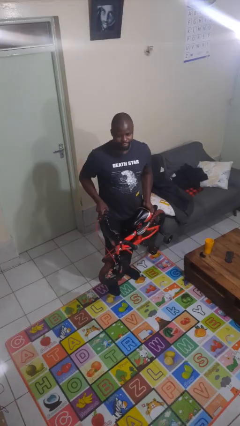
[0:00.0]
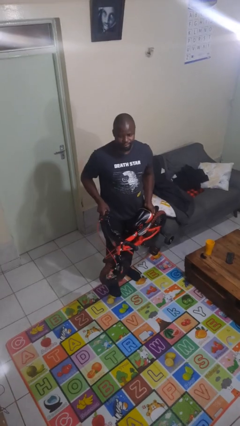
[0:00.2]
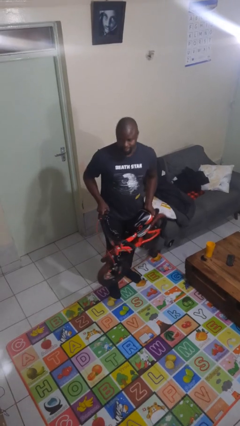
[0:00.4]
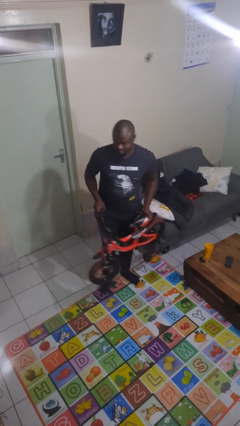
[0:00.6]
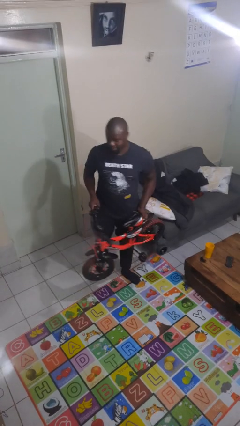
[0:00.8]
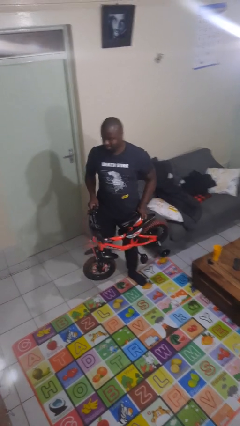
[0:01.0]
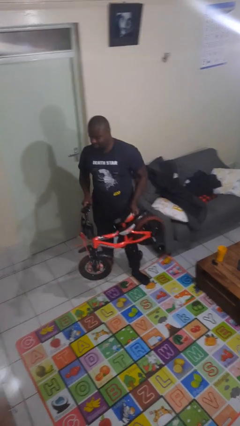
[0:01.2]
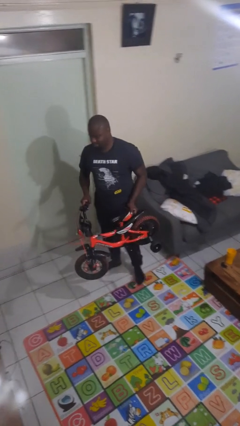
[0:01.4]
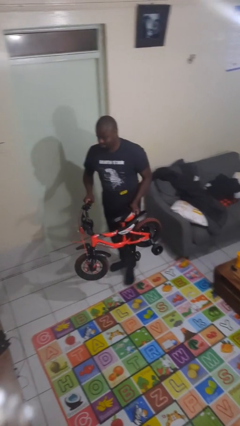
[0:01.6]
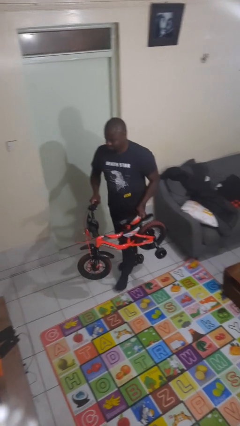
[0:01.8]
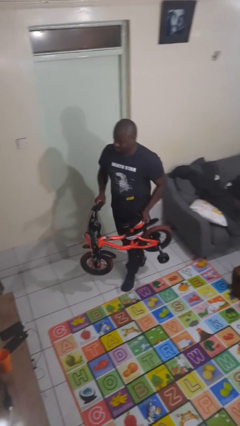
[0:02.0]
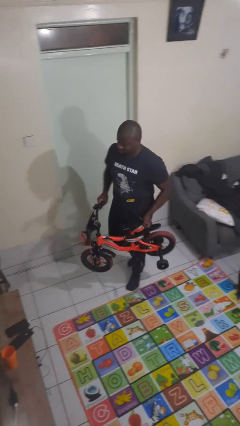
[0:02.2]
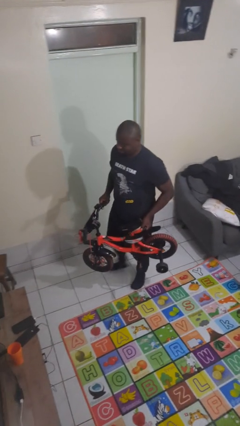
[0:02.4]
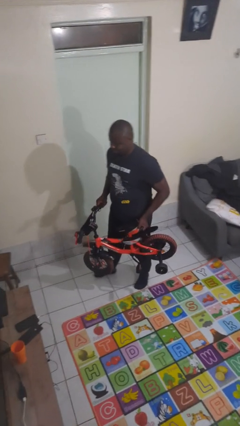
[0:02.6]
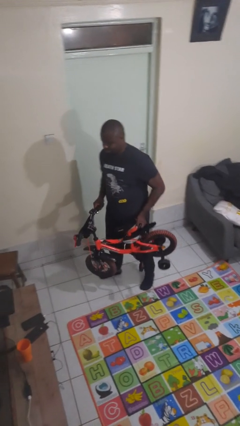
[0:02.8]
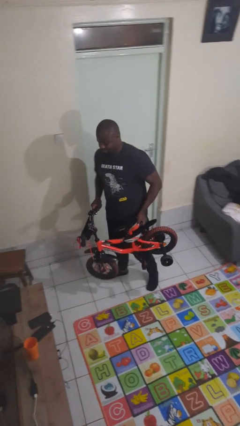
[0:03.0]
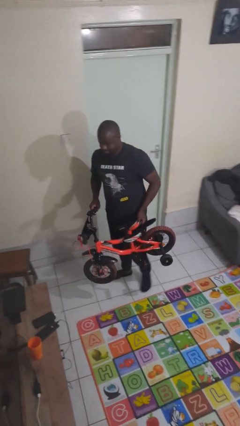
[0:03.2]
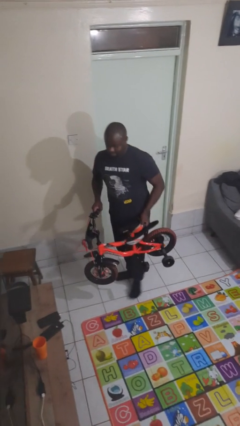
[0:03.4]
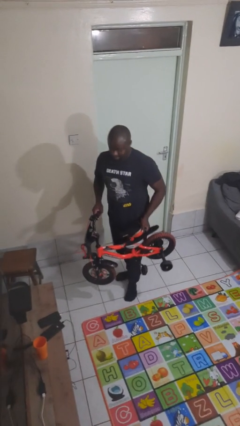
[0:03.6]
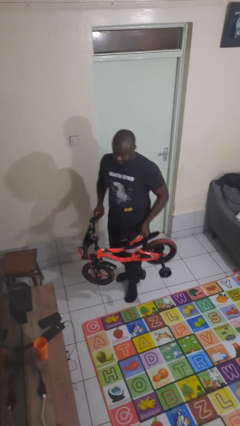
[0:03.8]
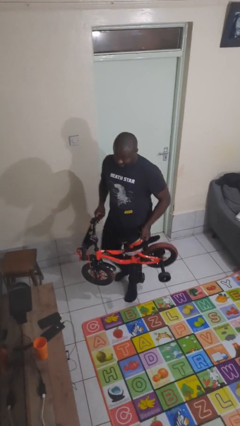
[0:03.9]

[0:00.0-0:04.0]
person carries bicycle

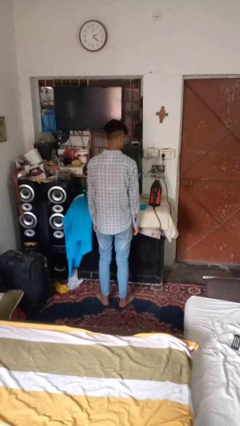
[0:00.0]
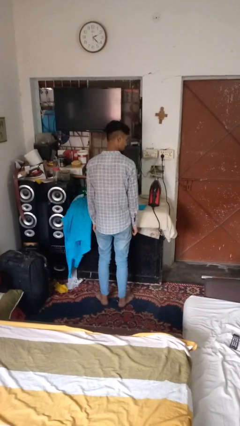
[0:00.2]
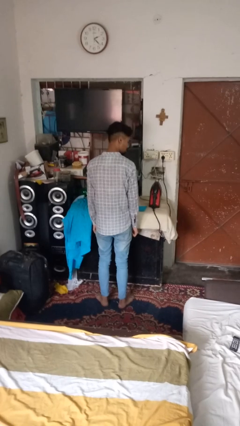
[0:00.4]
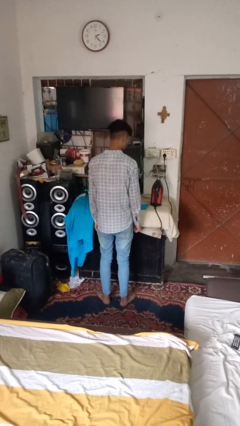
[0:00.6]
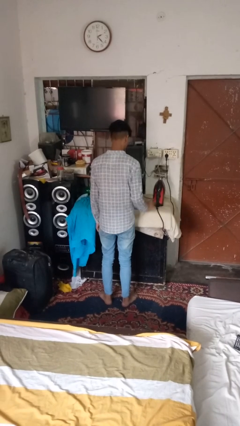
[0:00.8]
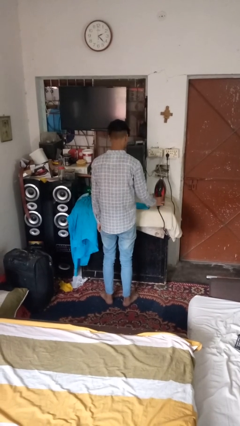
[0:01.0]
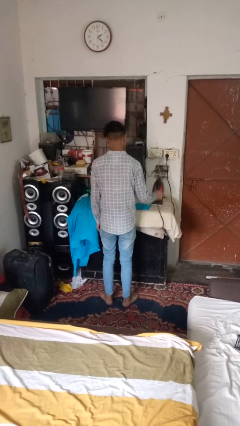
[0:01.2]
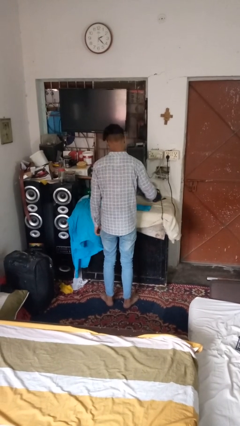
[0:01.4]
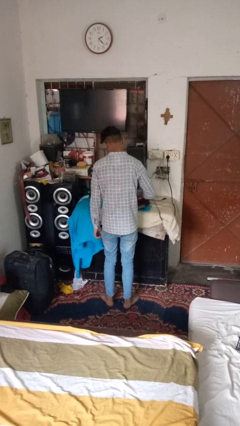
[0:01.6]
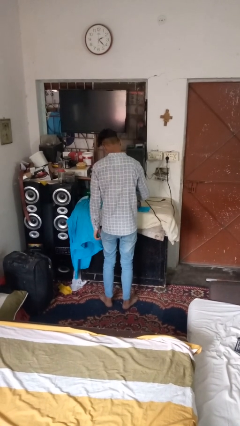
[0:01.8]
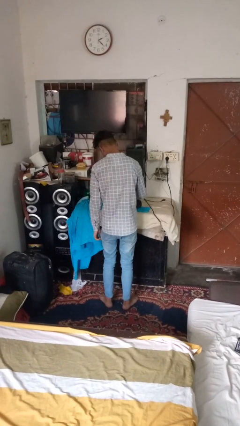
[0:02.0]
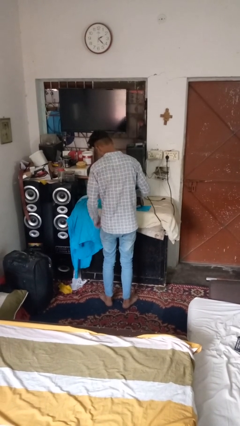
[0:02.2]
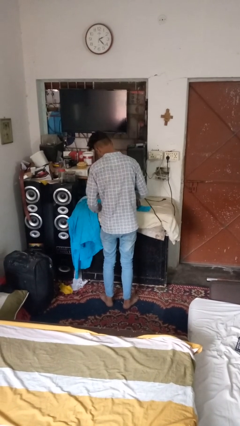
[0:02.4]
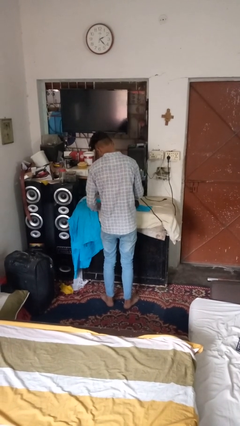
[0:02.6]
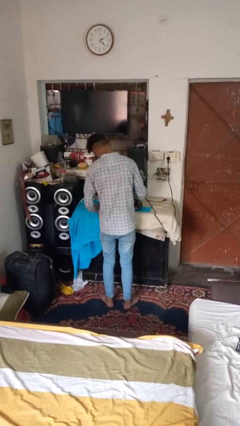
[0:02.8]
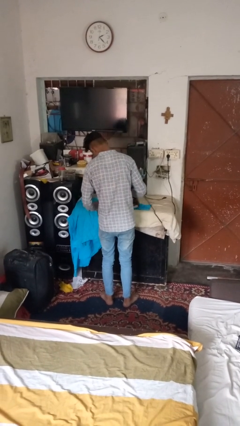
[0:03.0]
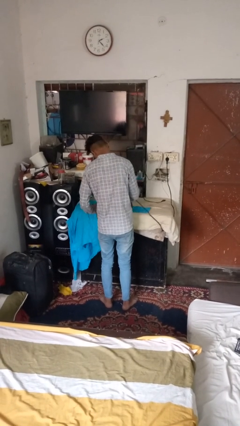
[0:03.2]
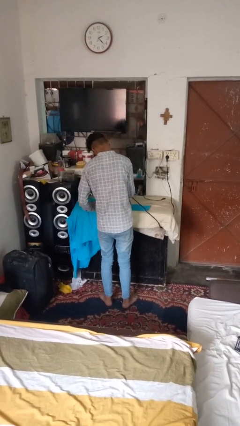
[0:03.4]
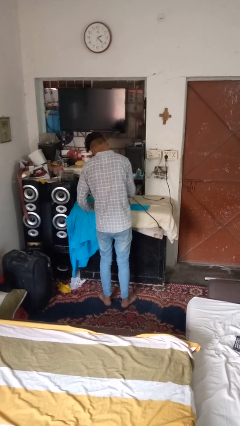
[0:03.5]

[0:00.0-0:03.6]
person irons clothes

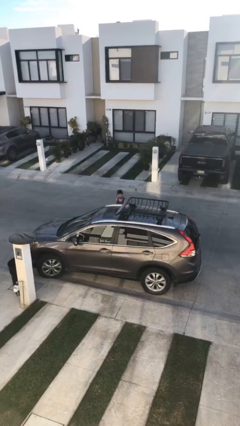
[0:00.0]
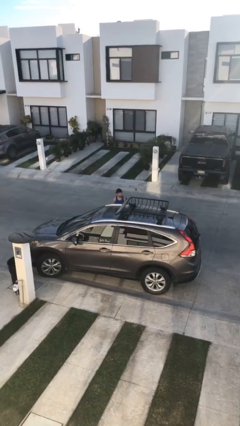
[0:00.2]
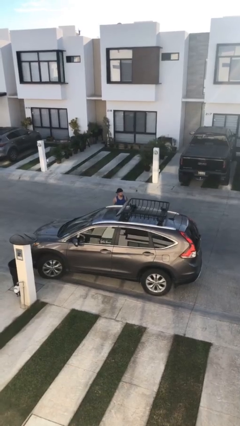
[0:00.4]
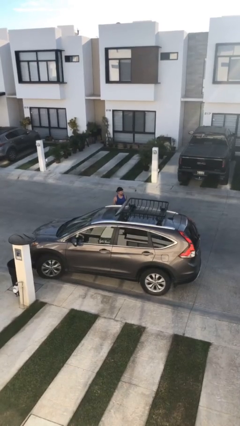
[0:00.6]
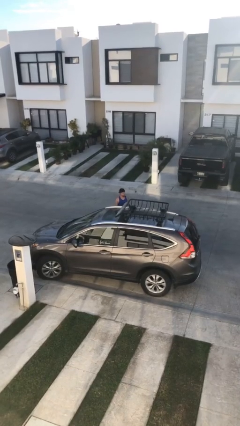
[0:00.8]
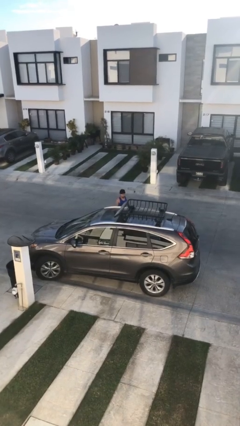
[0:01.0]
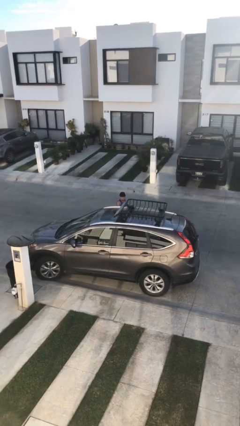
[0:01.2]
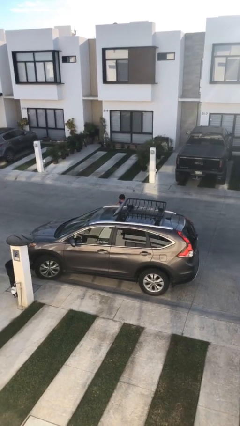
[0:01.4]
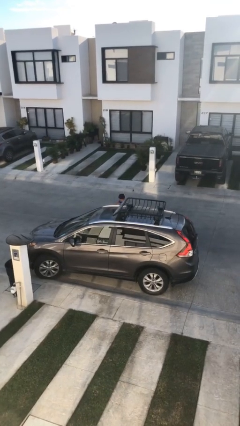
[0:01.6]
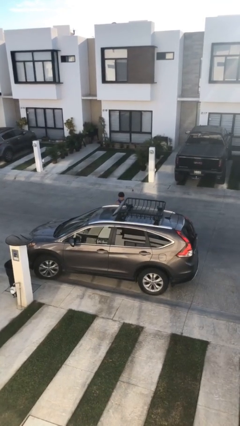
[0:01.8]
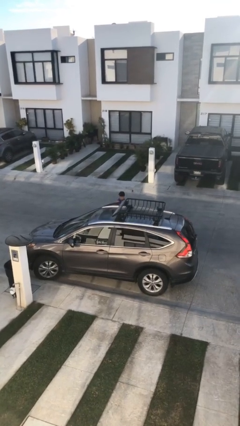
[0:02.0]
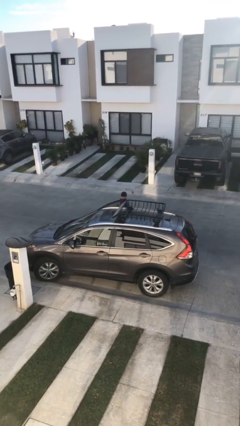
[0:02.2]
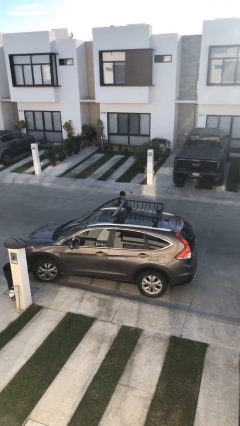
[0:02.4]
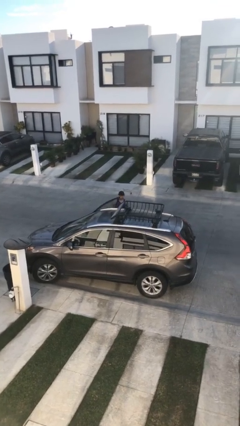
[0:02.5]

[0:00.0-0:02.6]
person opens car door

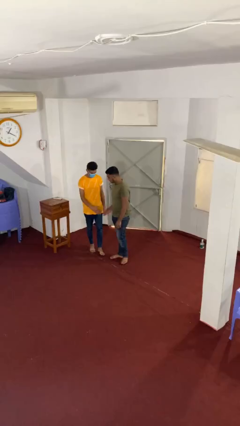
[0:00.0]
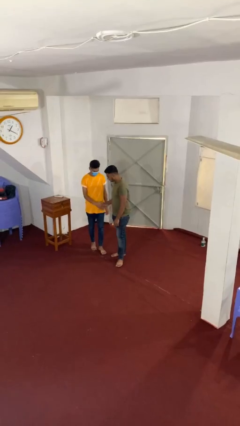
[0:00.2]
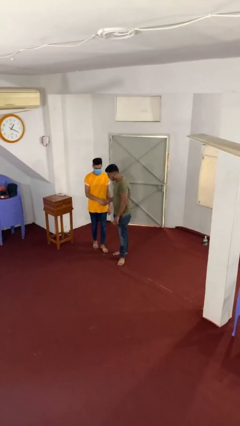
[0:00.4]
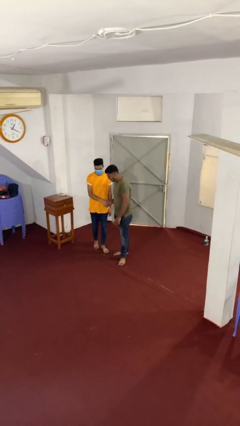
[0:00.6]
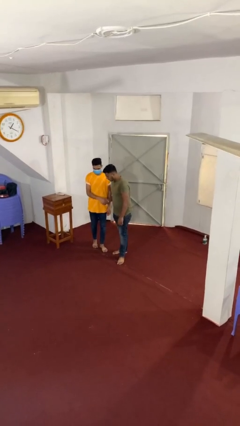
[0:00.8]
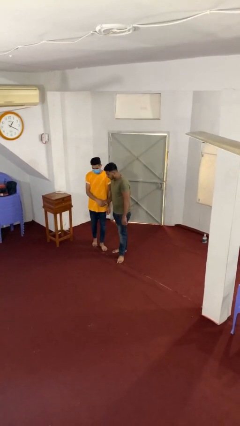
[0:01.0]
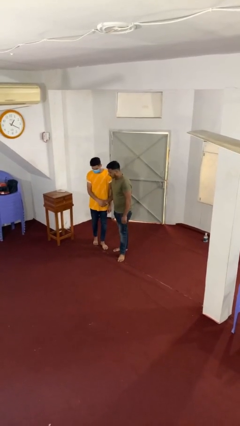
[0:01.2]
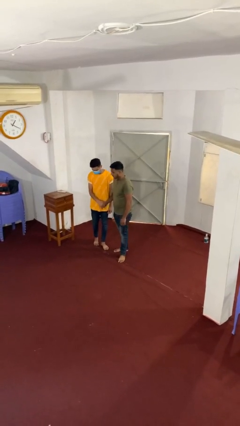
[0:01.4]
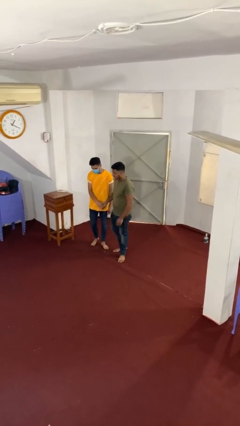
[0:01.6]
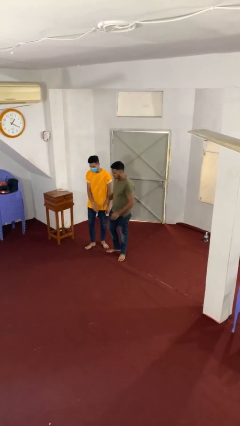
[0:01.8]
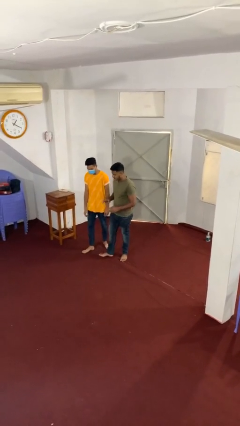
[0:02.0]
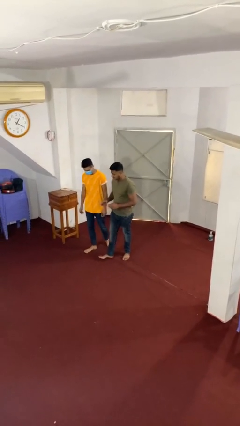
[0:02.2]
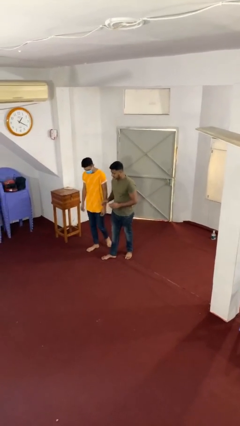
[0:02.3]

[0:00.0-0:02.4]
person shakes hand

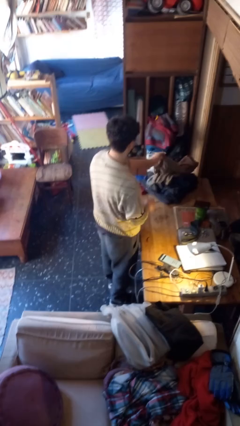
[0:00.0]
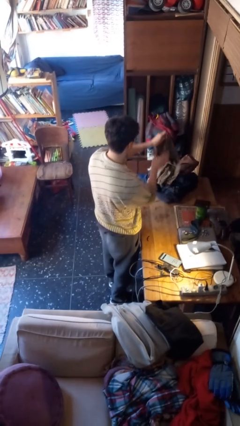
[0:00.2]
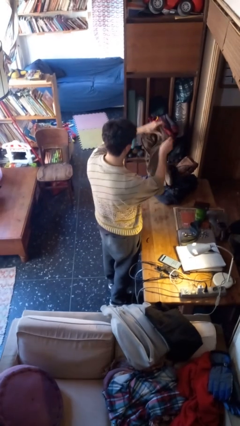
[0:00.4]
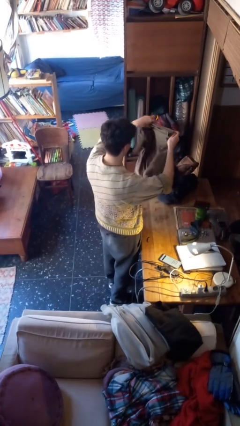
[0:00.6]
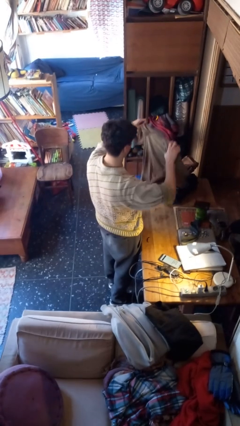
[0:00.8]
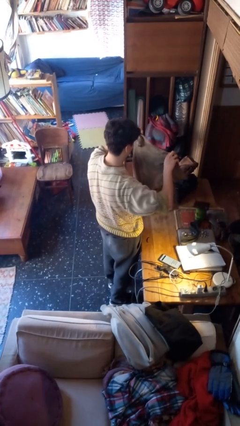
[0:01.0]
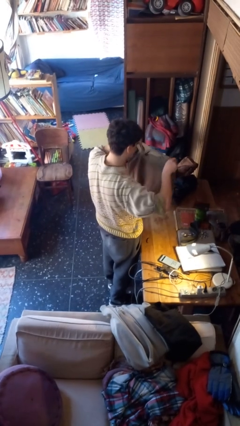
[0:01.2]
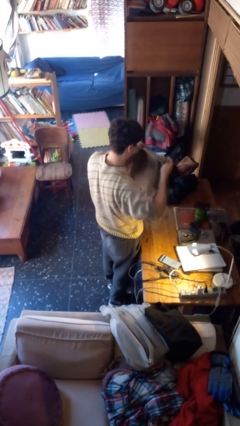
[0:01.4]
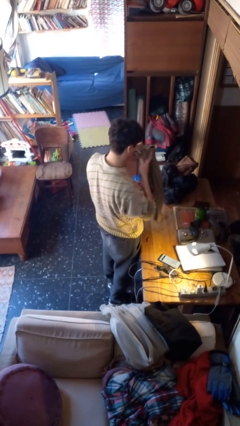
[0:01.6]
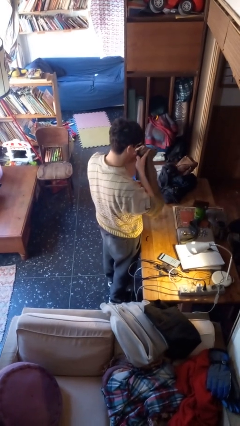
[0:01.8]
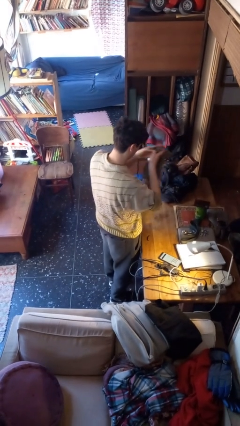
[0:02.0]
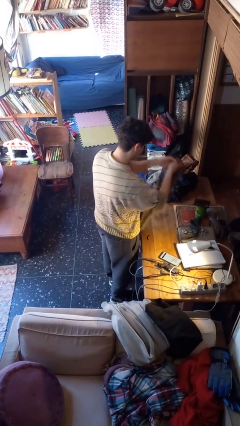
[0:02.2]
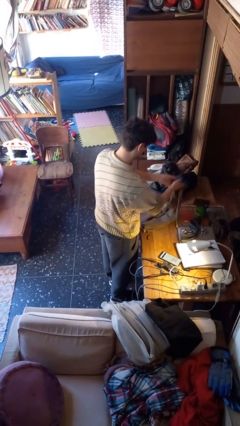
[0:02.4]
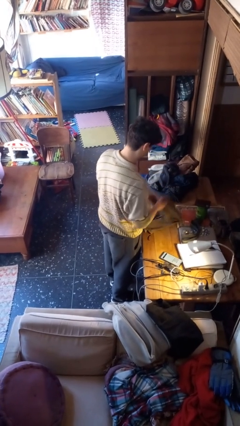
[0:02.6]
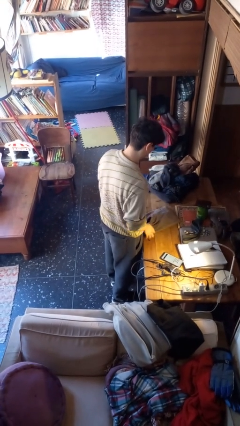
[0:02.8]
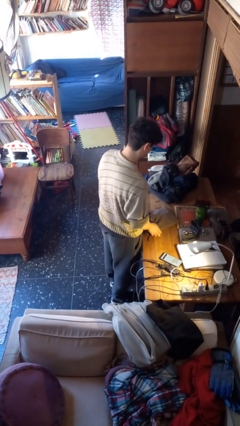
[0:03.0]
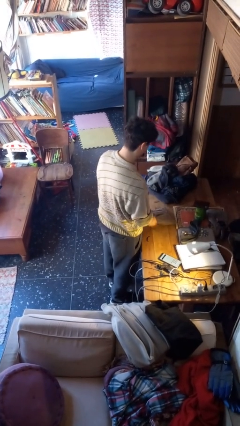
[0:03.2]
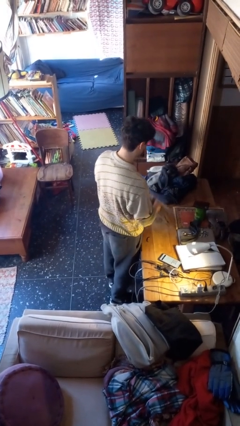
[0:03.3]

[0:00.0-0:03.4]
person folds shirt

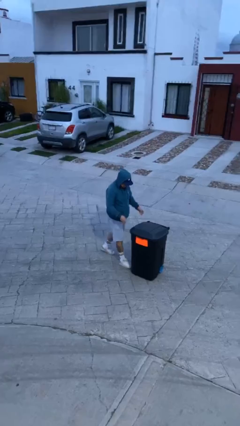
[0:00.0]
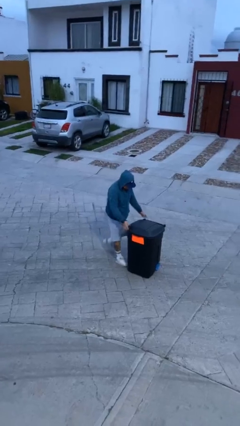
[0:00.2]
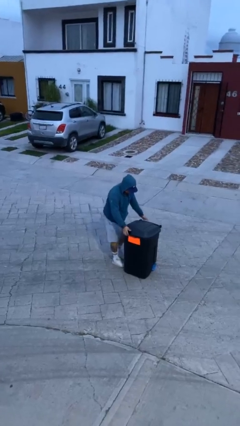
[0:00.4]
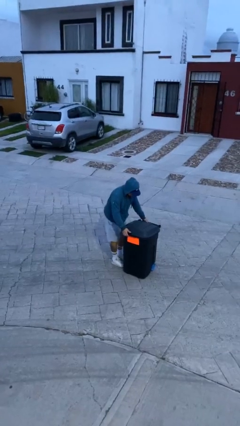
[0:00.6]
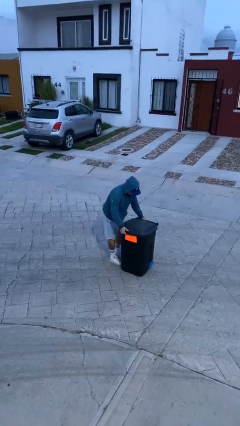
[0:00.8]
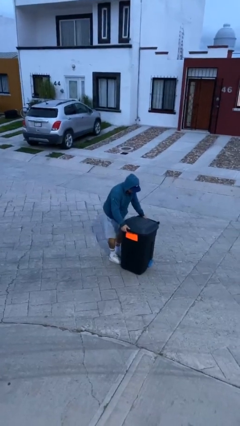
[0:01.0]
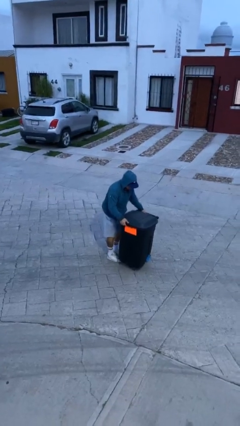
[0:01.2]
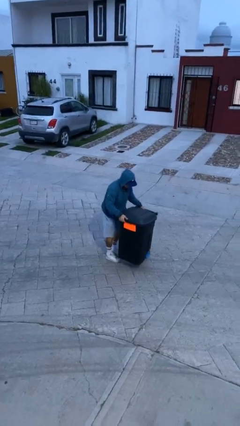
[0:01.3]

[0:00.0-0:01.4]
person picks up object from floor
